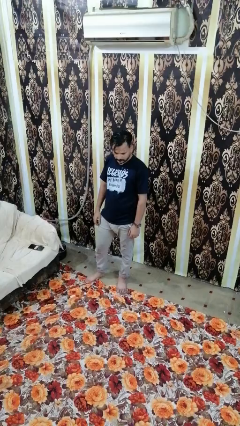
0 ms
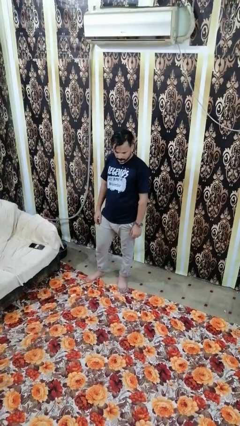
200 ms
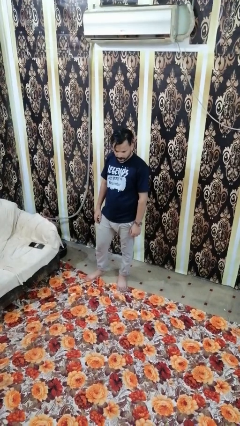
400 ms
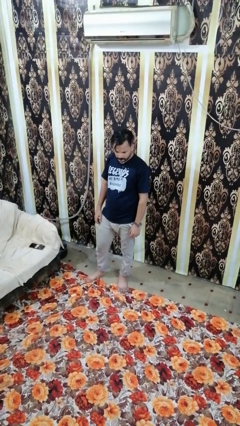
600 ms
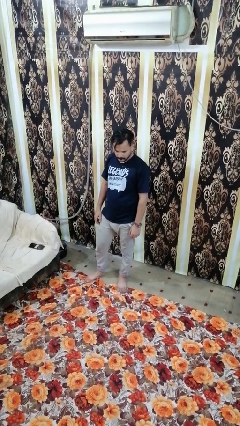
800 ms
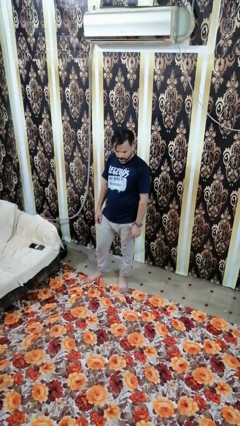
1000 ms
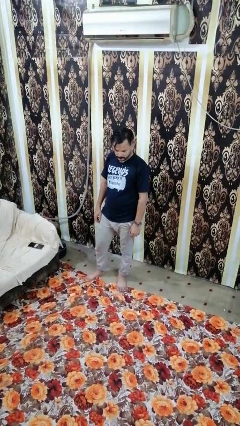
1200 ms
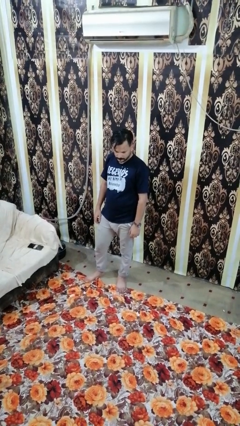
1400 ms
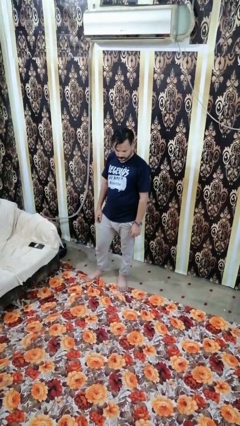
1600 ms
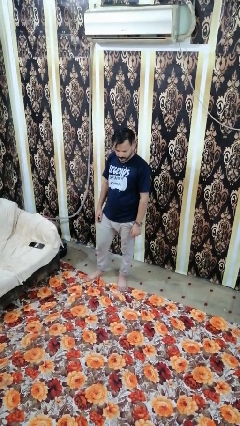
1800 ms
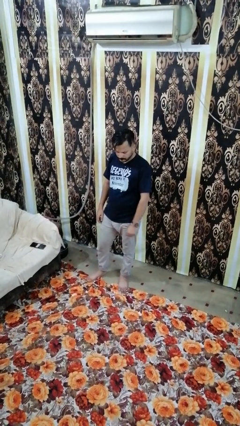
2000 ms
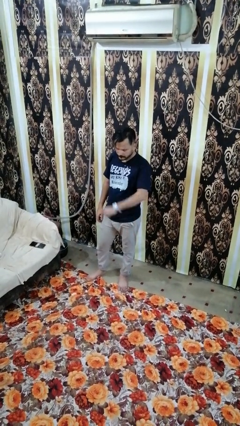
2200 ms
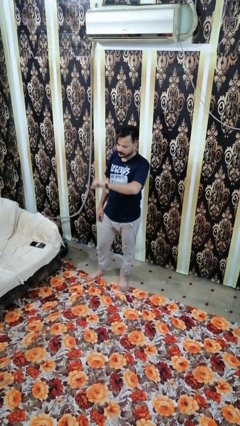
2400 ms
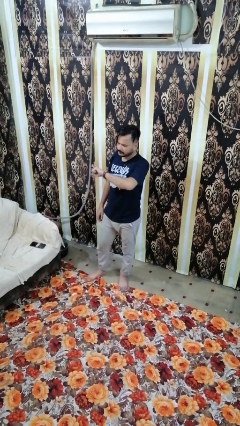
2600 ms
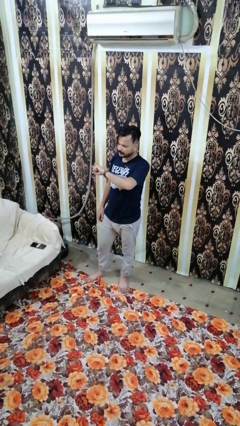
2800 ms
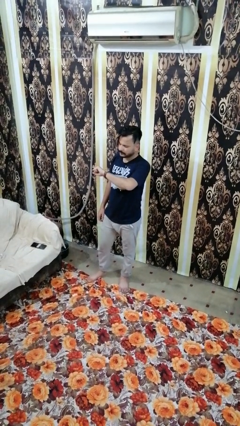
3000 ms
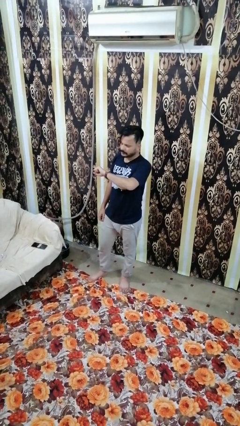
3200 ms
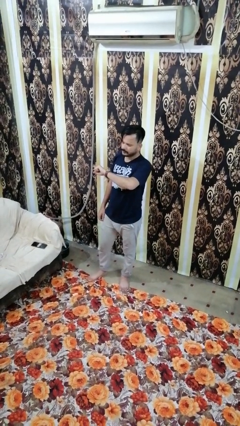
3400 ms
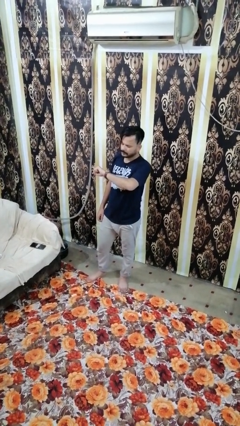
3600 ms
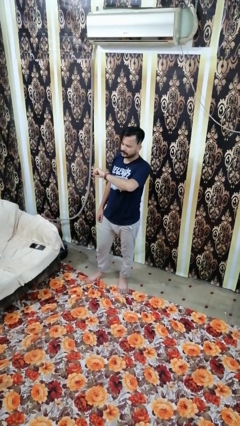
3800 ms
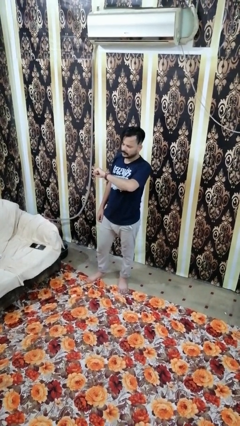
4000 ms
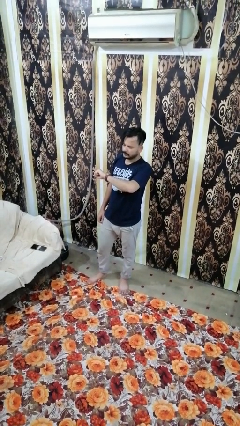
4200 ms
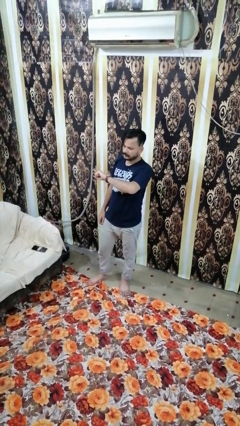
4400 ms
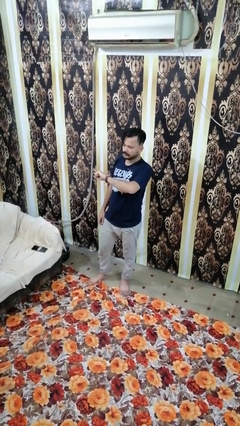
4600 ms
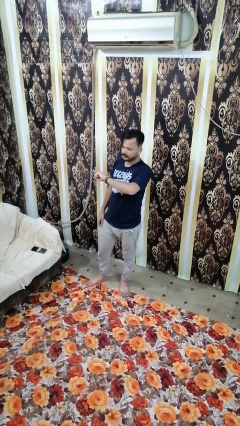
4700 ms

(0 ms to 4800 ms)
person looks at wristwatch

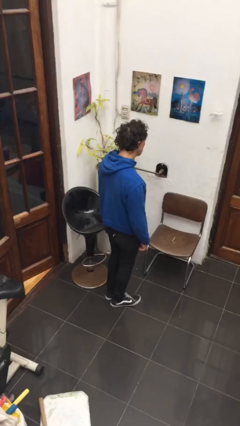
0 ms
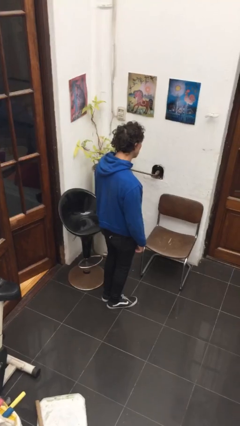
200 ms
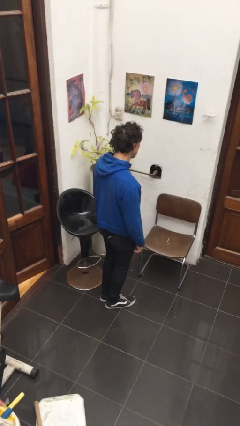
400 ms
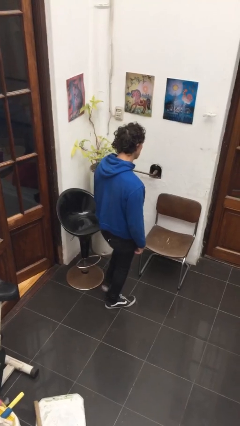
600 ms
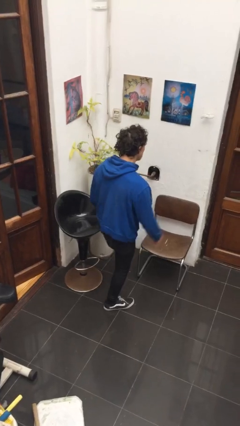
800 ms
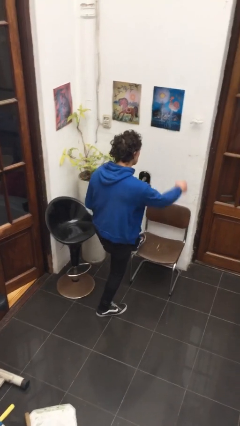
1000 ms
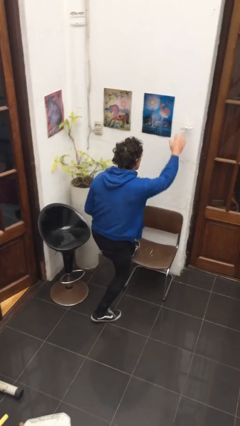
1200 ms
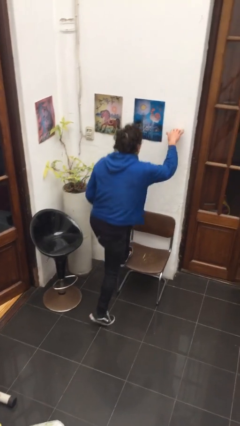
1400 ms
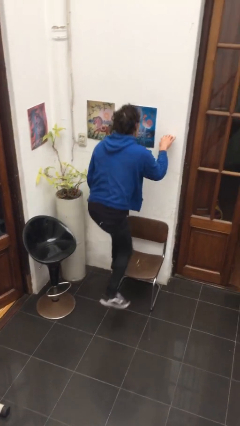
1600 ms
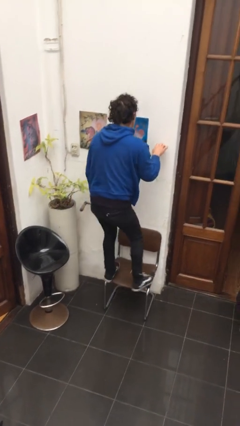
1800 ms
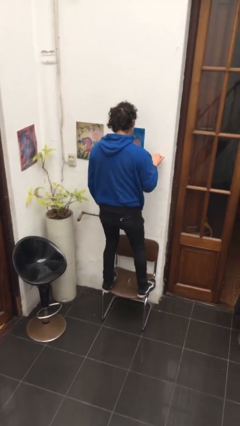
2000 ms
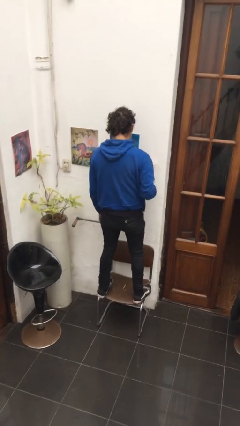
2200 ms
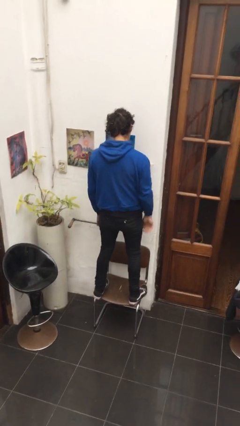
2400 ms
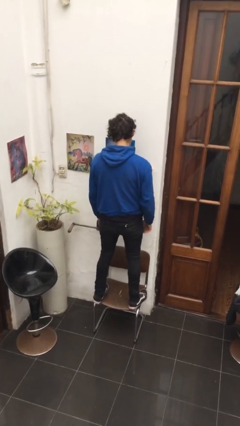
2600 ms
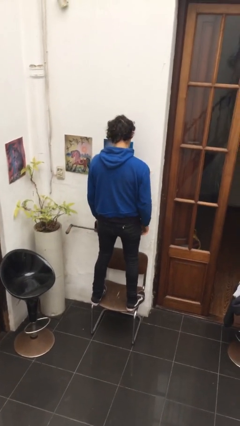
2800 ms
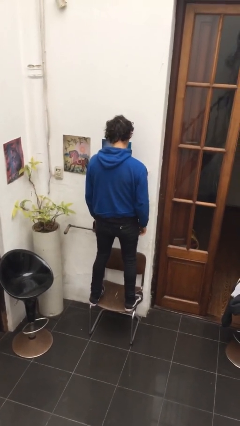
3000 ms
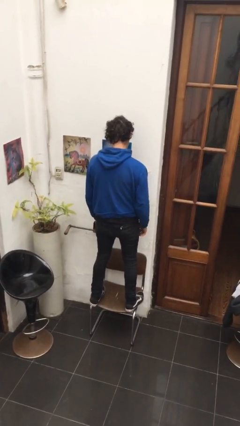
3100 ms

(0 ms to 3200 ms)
person climbs on chair

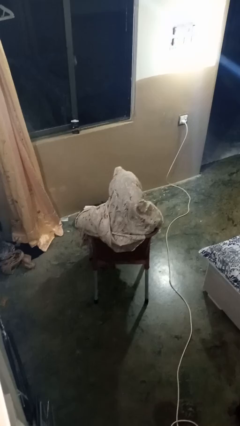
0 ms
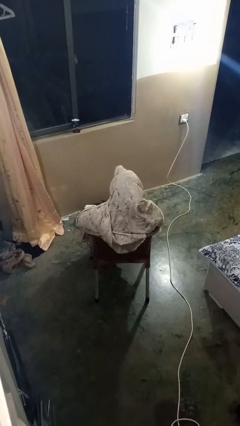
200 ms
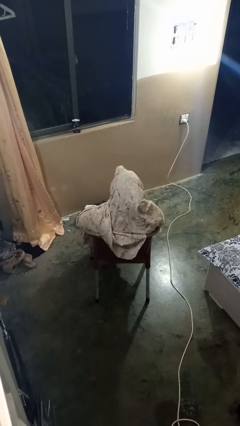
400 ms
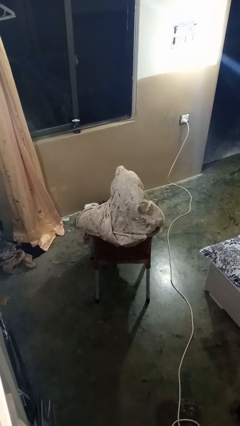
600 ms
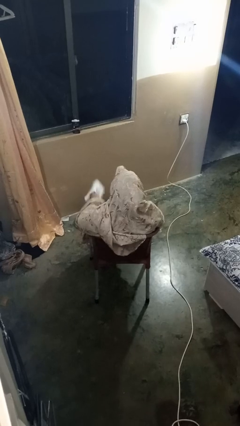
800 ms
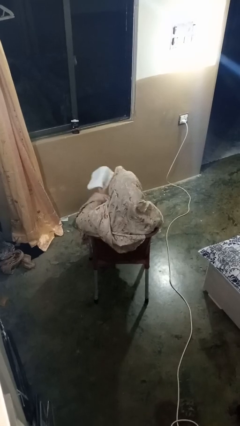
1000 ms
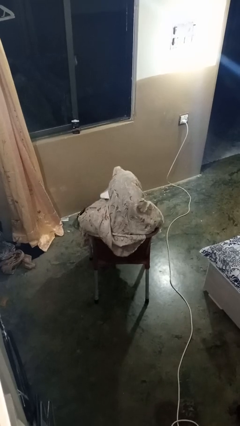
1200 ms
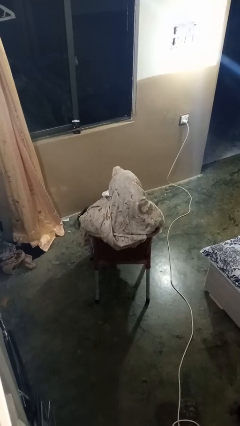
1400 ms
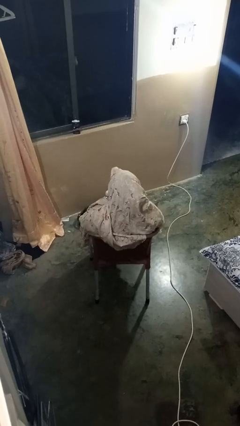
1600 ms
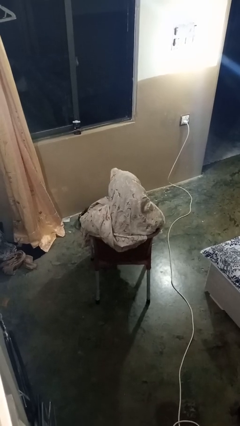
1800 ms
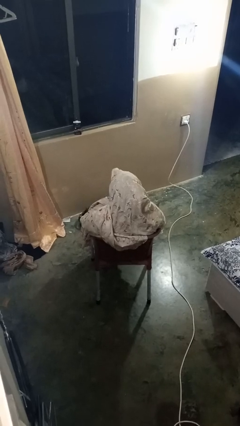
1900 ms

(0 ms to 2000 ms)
person wipes mouth with napkin

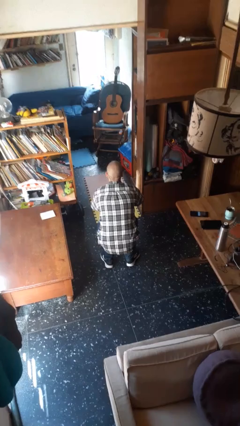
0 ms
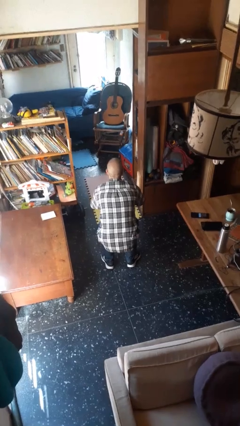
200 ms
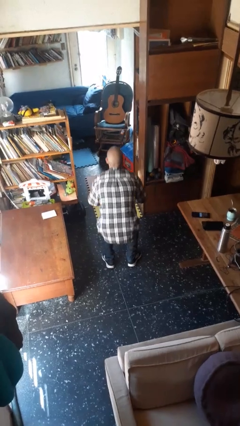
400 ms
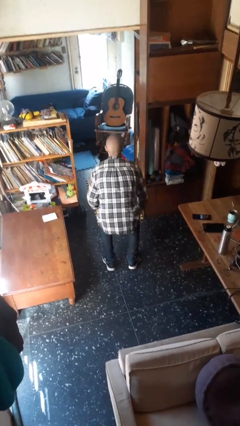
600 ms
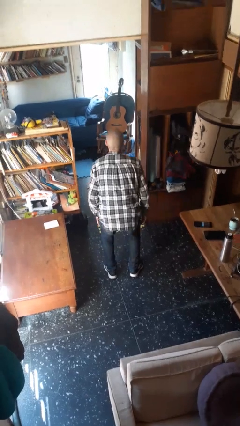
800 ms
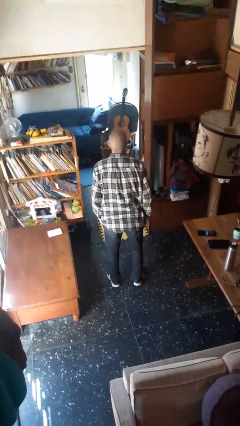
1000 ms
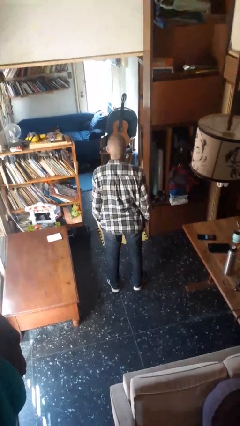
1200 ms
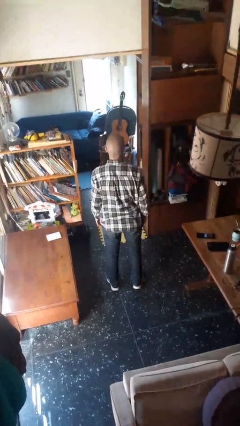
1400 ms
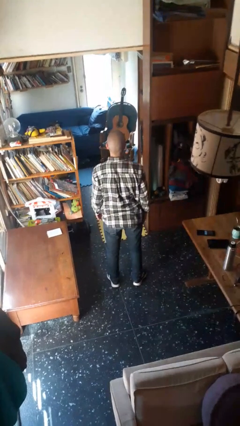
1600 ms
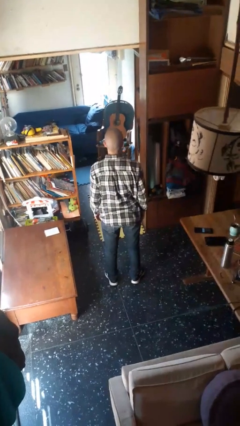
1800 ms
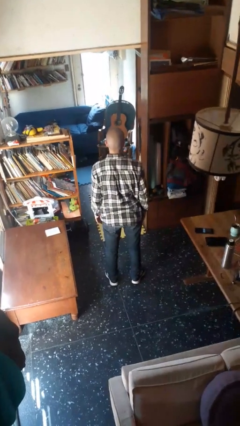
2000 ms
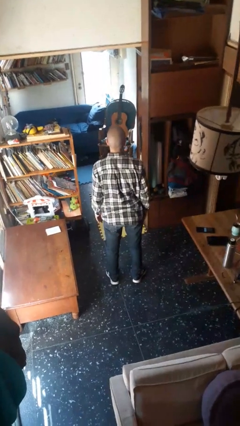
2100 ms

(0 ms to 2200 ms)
person stands up

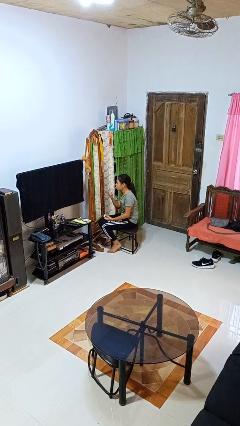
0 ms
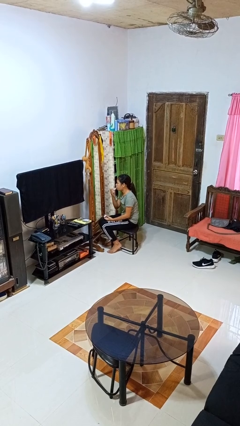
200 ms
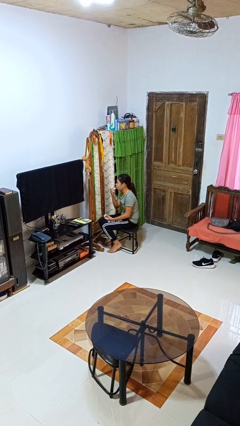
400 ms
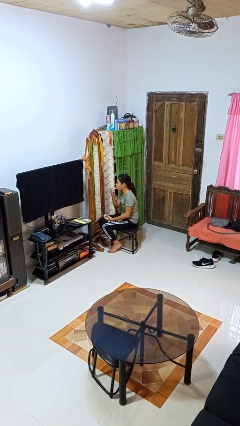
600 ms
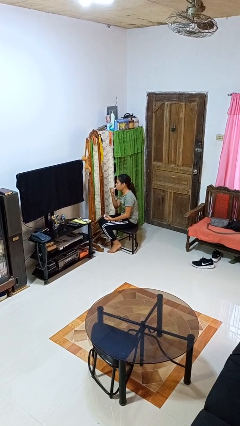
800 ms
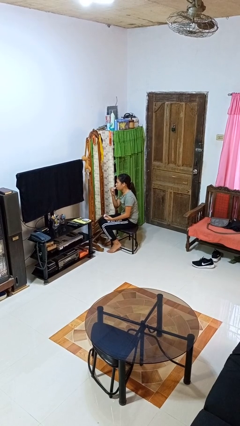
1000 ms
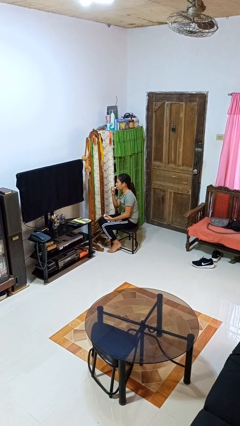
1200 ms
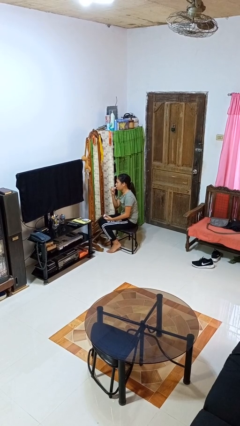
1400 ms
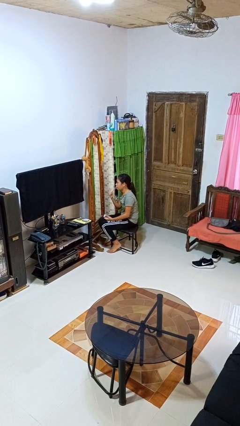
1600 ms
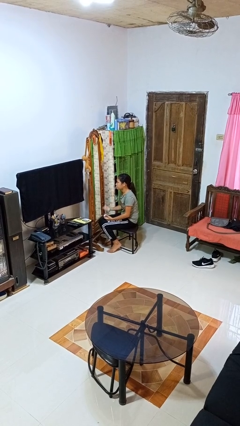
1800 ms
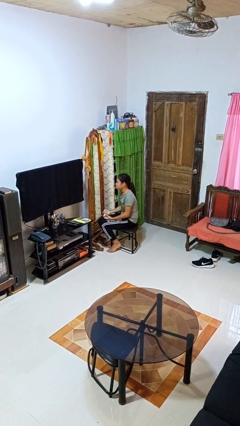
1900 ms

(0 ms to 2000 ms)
person applies lip makeup

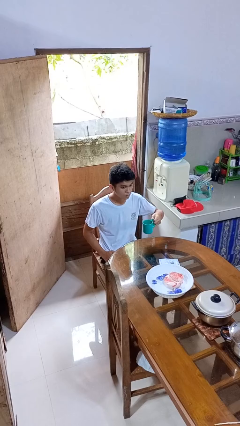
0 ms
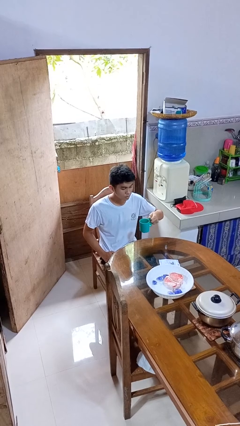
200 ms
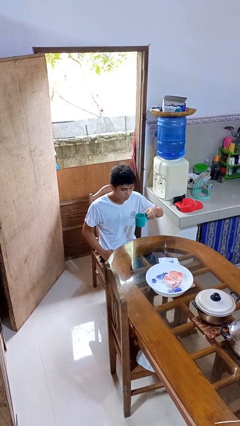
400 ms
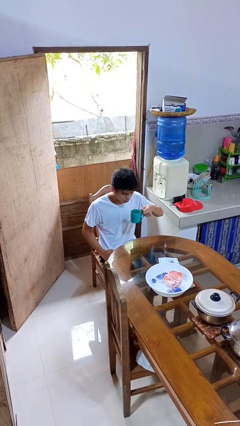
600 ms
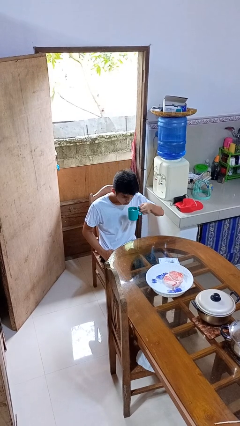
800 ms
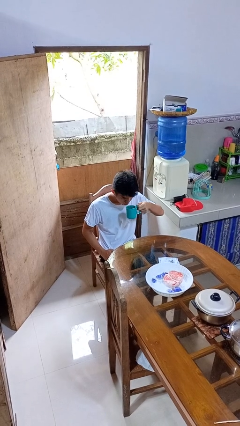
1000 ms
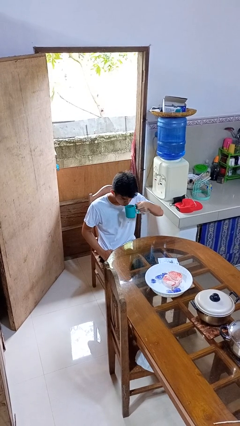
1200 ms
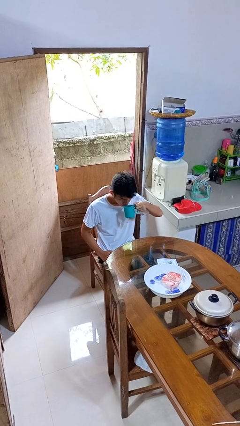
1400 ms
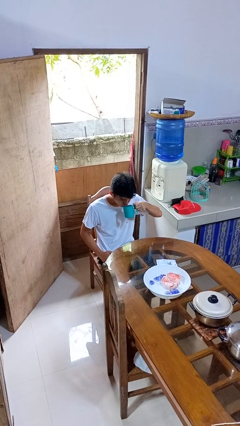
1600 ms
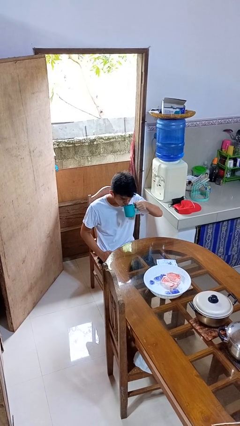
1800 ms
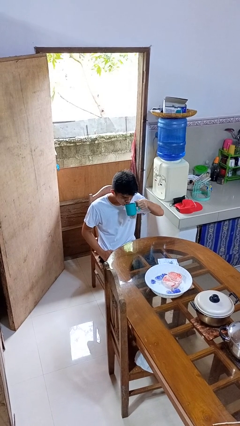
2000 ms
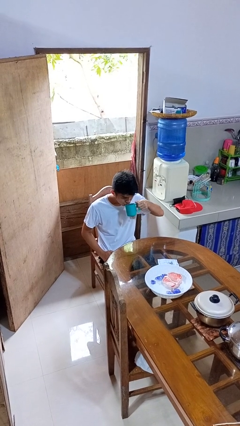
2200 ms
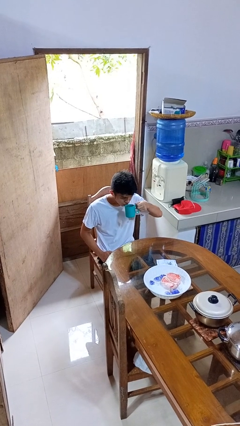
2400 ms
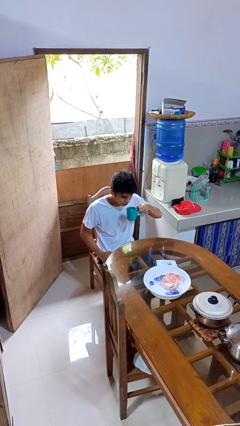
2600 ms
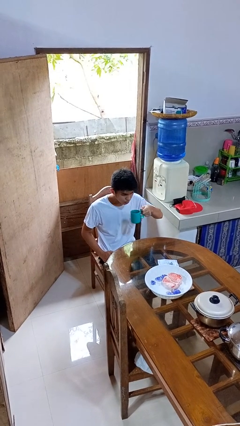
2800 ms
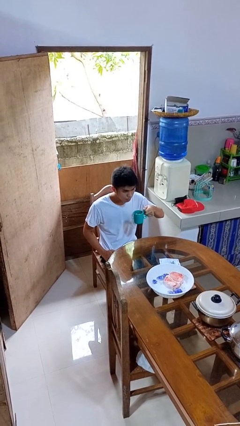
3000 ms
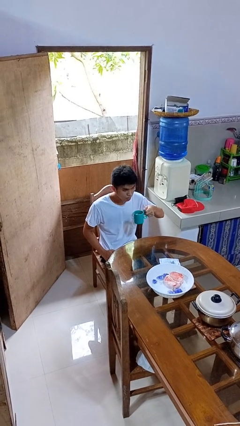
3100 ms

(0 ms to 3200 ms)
person drinks from mug

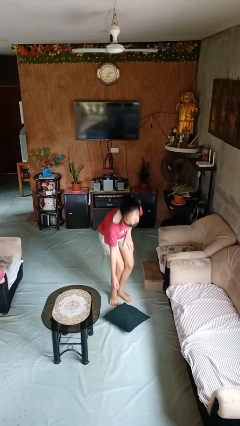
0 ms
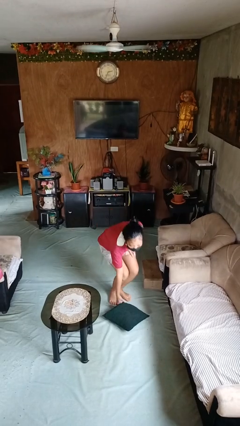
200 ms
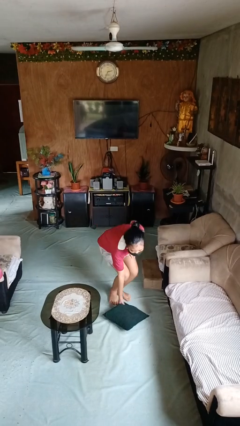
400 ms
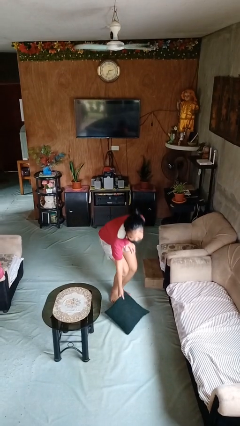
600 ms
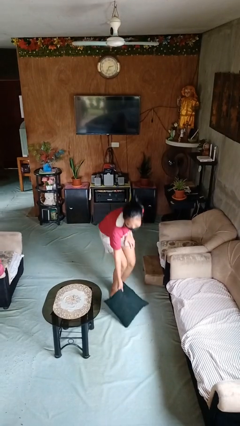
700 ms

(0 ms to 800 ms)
person picks up object from floor
